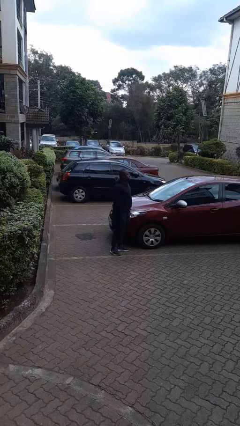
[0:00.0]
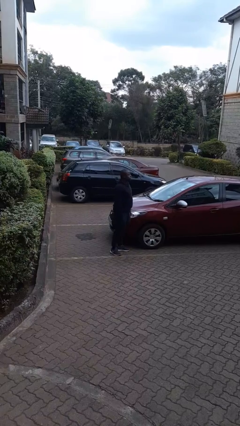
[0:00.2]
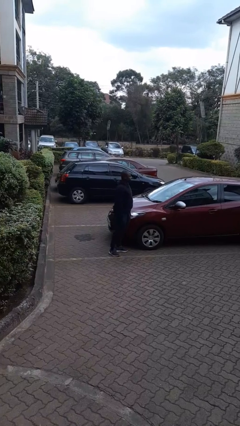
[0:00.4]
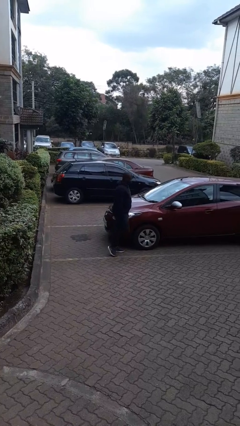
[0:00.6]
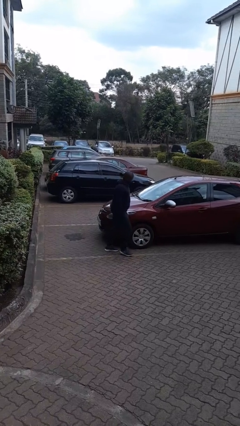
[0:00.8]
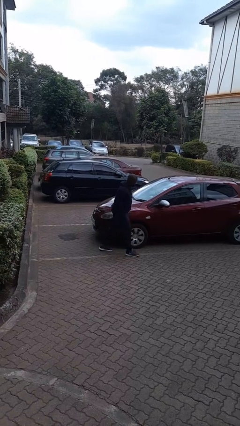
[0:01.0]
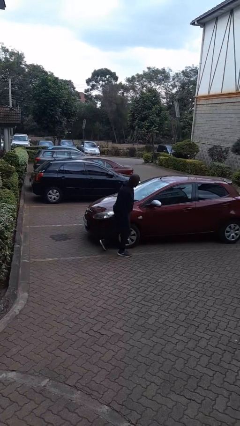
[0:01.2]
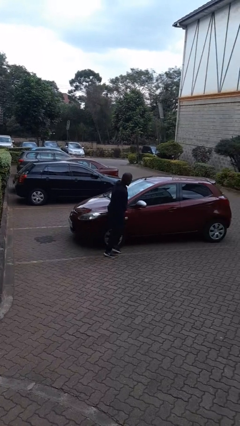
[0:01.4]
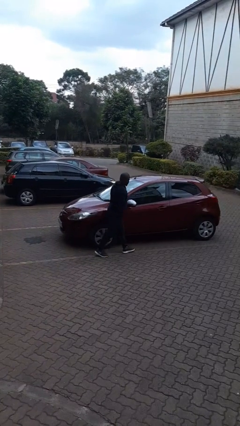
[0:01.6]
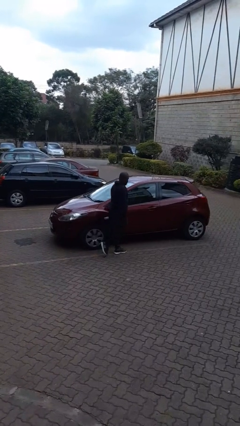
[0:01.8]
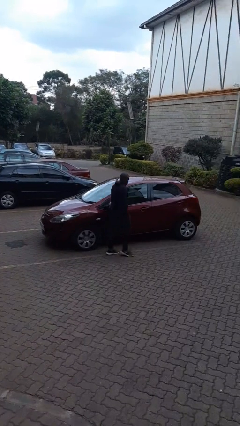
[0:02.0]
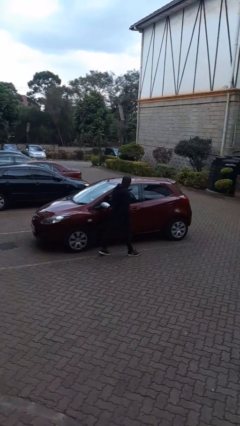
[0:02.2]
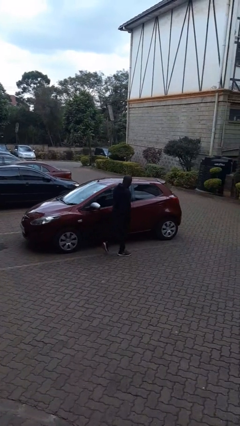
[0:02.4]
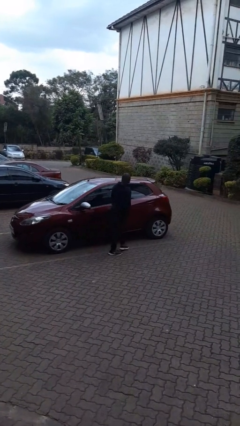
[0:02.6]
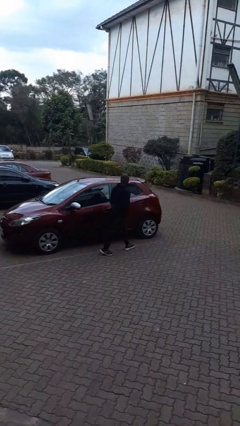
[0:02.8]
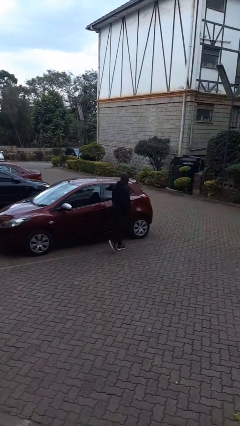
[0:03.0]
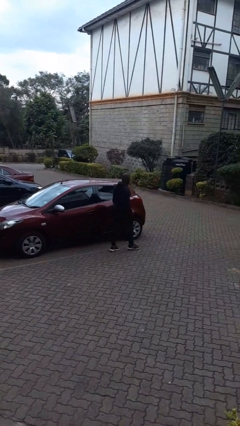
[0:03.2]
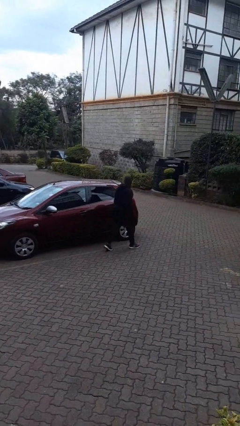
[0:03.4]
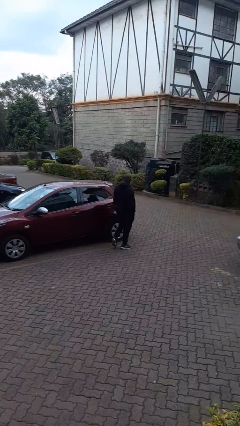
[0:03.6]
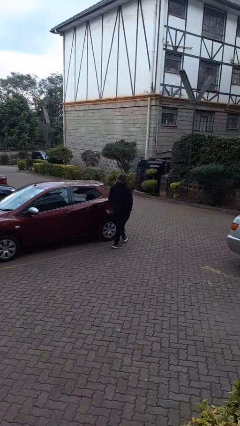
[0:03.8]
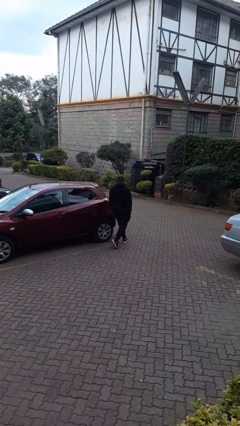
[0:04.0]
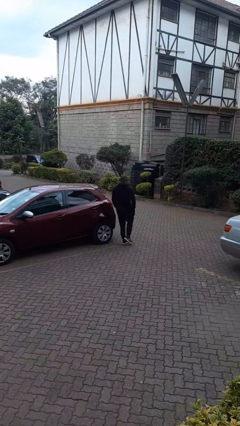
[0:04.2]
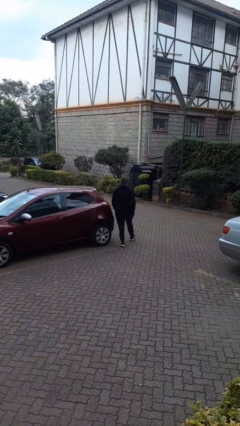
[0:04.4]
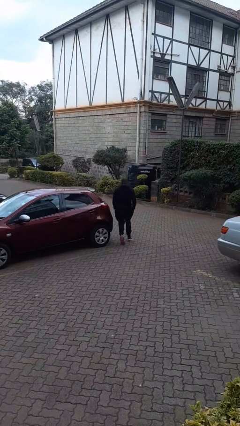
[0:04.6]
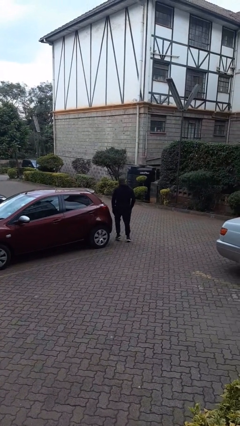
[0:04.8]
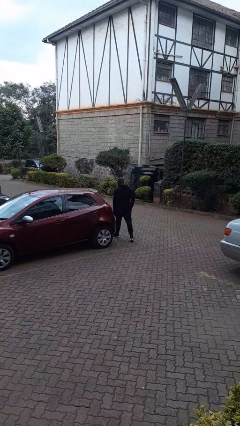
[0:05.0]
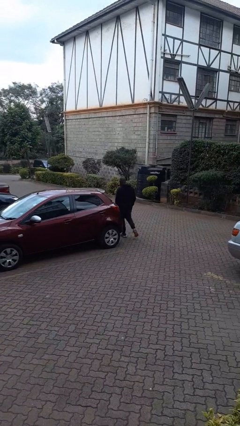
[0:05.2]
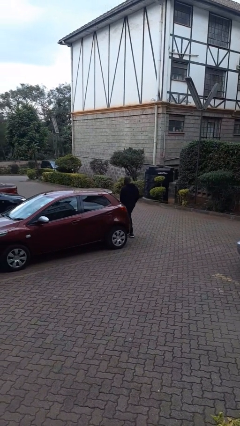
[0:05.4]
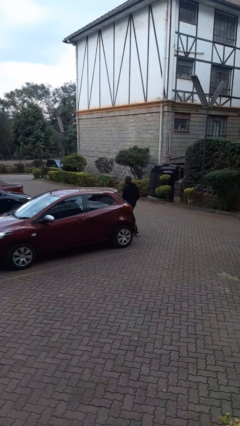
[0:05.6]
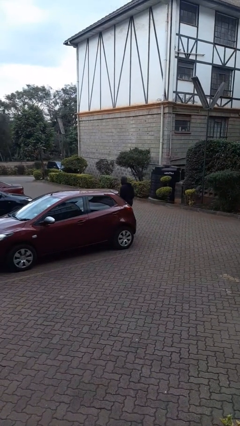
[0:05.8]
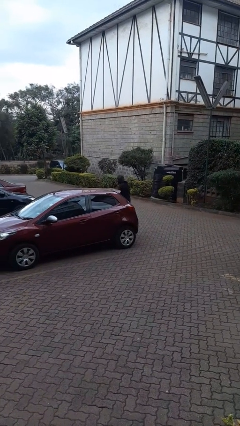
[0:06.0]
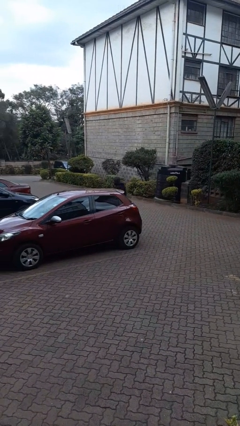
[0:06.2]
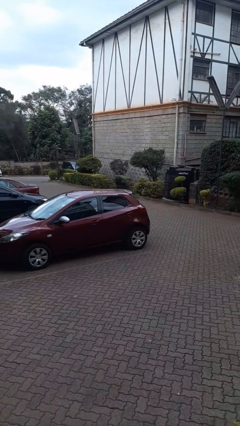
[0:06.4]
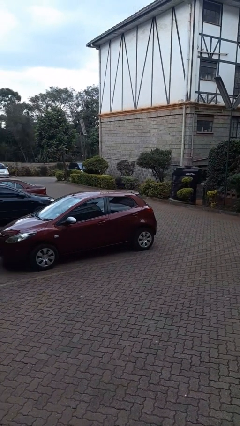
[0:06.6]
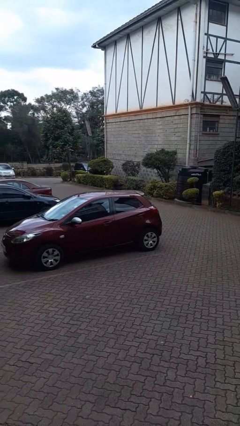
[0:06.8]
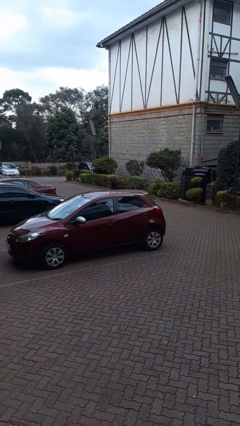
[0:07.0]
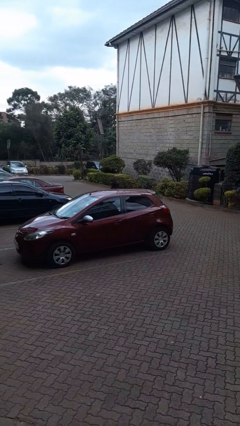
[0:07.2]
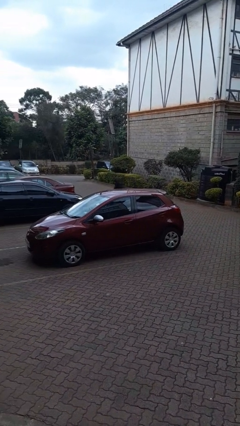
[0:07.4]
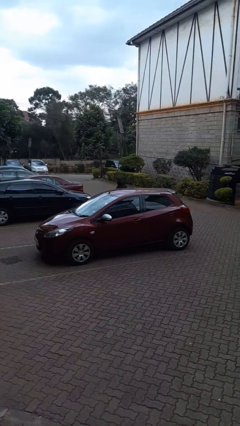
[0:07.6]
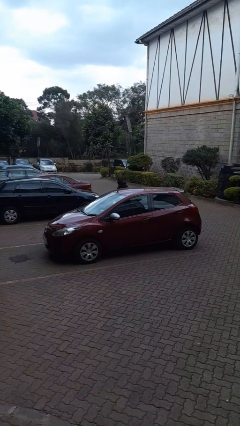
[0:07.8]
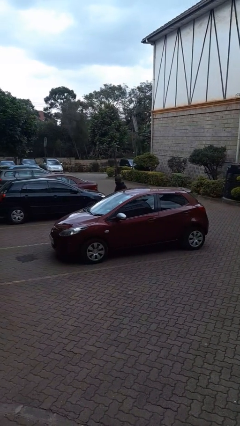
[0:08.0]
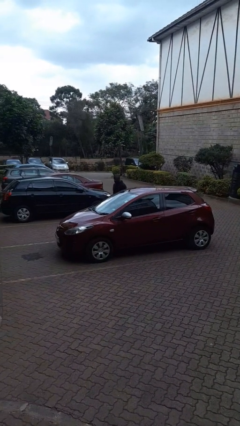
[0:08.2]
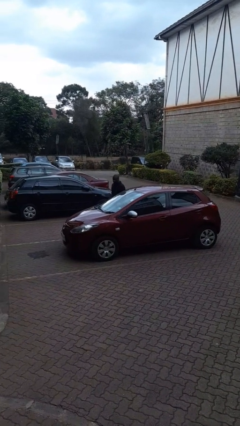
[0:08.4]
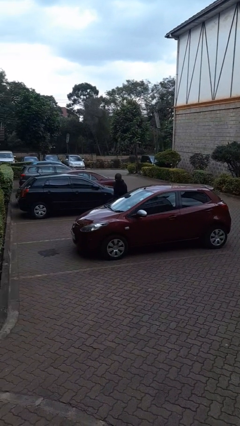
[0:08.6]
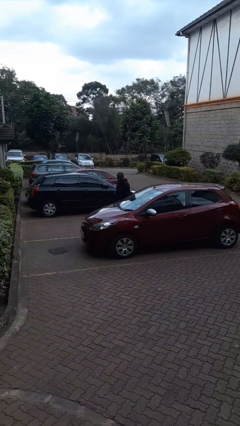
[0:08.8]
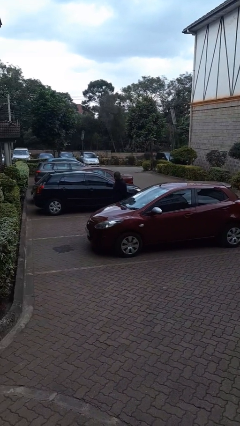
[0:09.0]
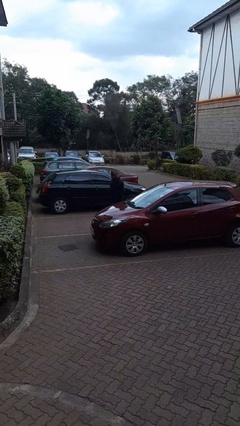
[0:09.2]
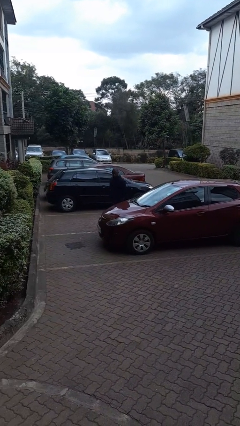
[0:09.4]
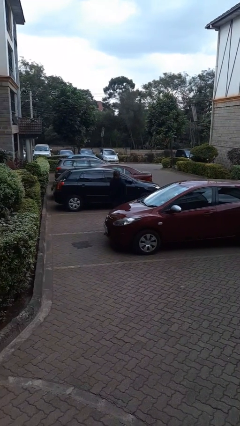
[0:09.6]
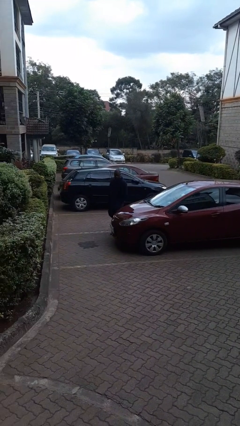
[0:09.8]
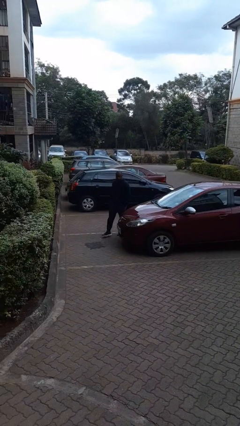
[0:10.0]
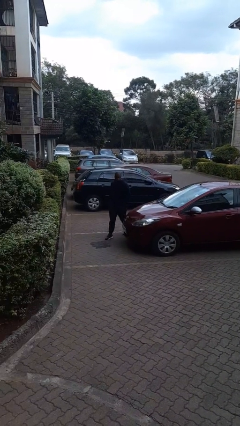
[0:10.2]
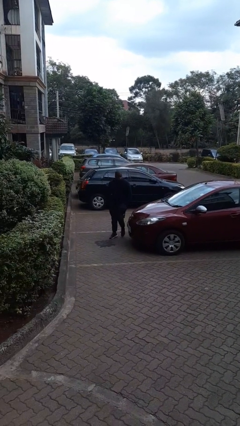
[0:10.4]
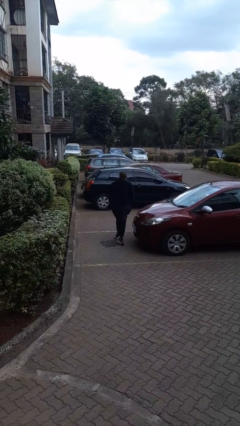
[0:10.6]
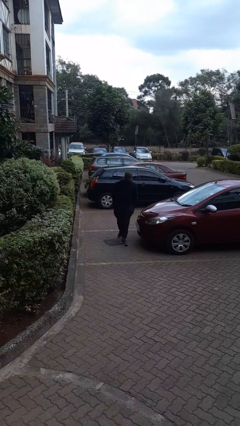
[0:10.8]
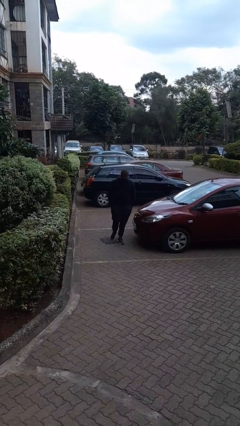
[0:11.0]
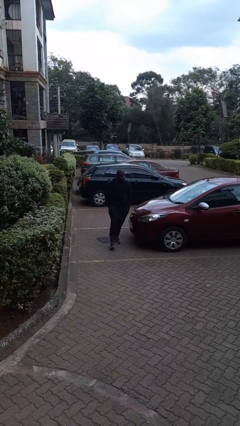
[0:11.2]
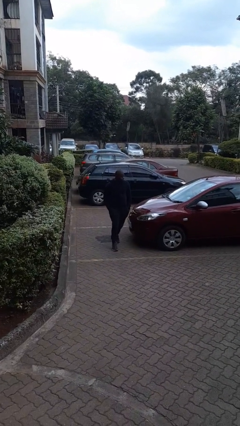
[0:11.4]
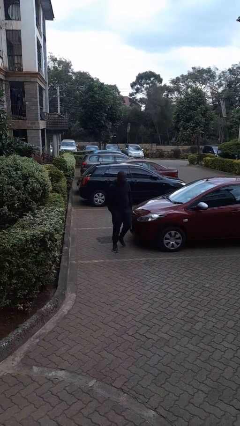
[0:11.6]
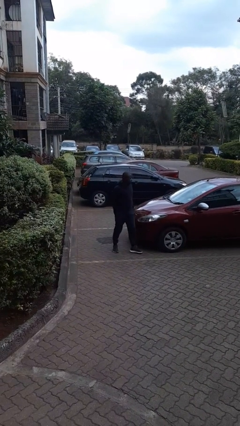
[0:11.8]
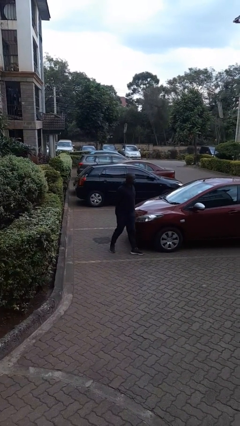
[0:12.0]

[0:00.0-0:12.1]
person walks around car

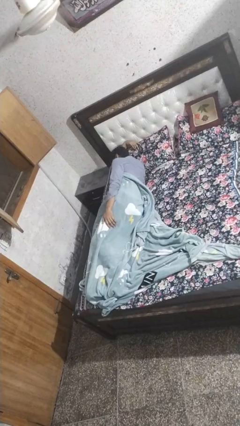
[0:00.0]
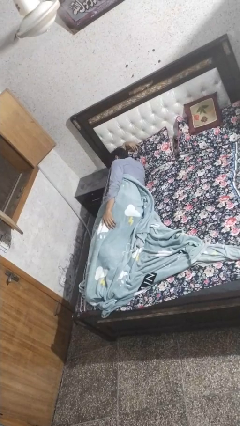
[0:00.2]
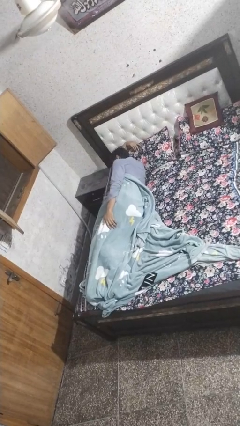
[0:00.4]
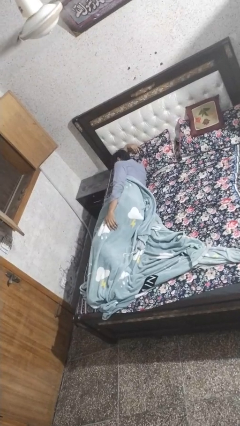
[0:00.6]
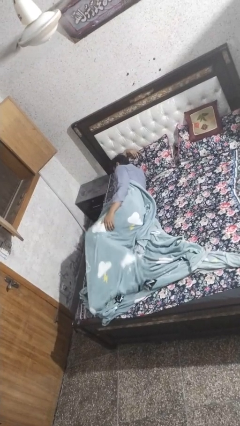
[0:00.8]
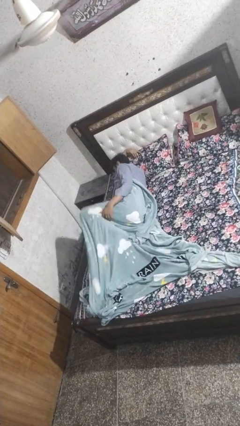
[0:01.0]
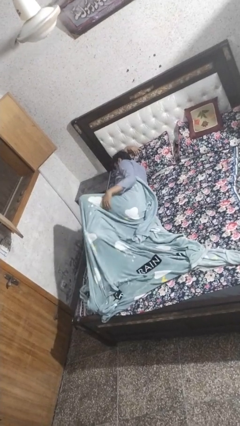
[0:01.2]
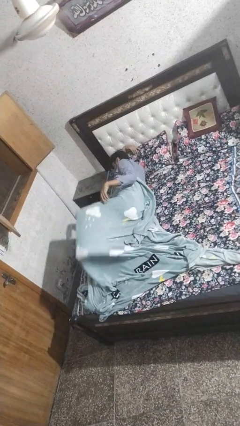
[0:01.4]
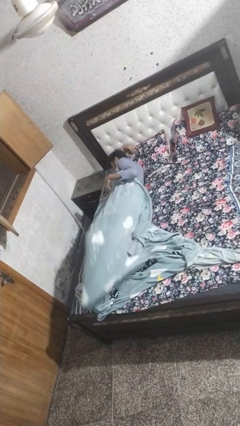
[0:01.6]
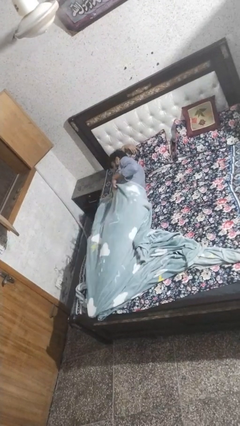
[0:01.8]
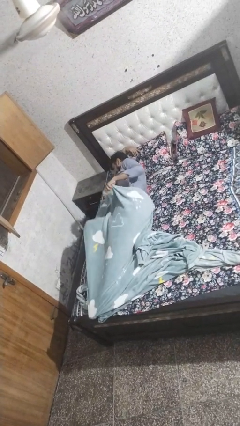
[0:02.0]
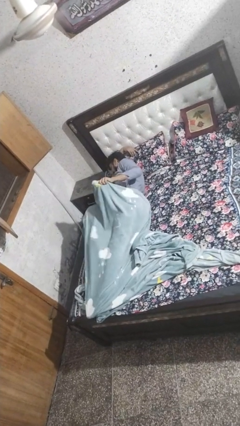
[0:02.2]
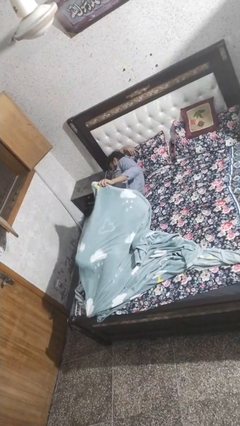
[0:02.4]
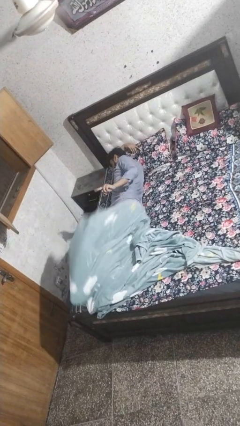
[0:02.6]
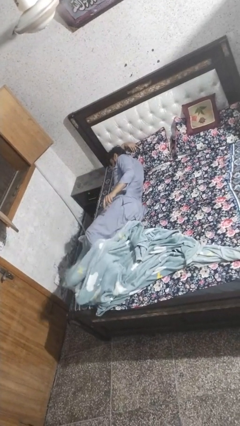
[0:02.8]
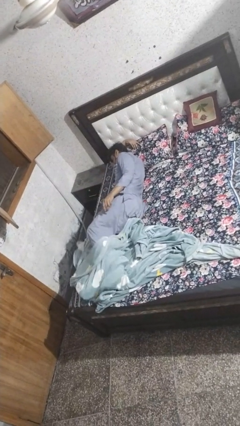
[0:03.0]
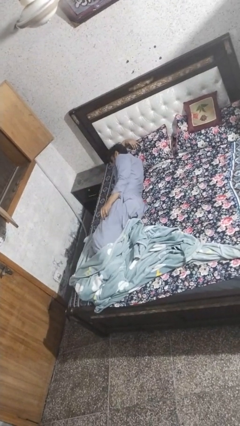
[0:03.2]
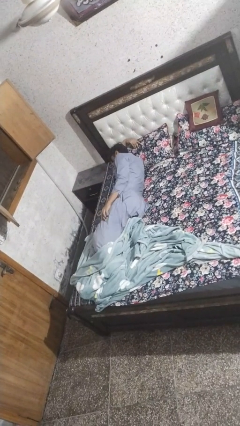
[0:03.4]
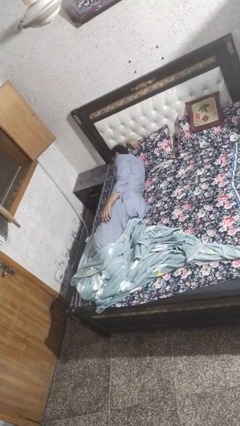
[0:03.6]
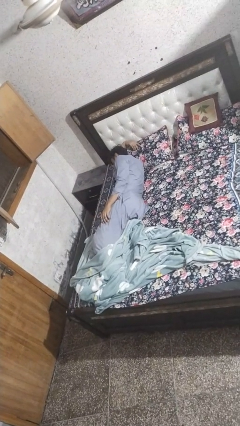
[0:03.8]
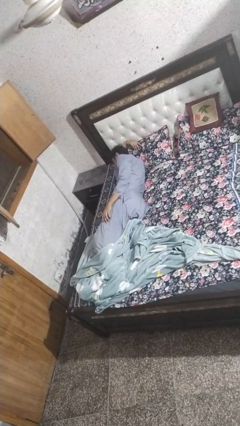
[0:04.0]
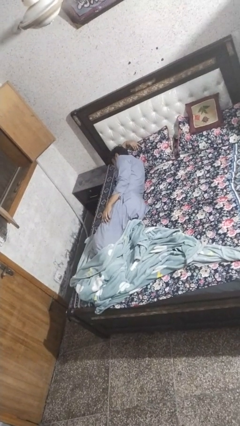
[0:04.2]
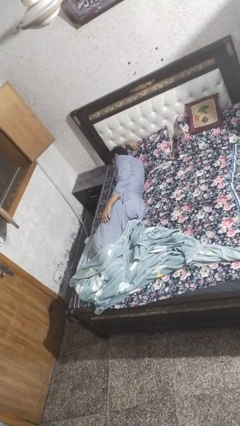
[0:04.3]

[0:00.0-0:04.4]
person uncovers with bedsheets

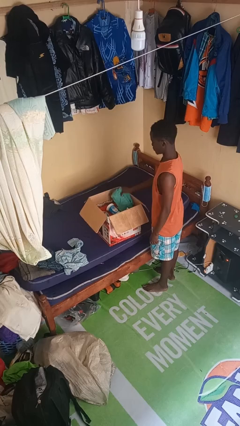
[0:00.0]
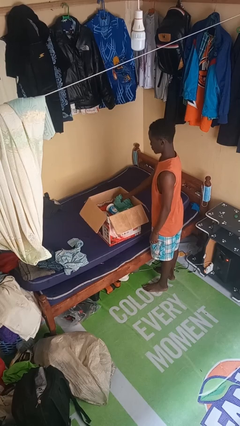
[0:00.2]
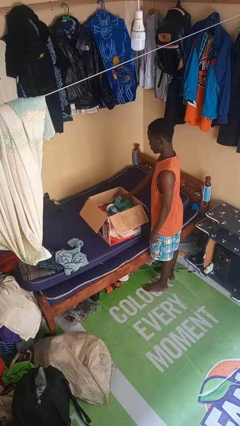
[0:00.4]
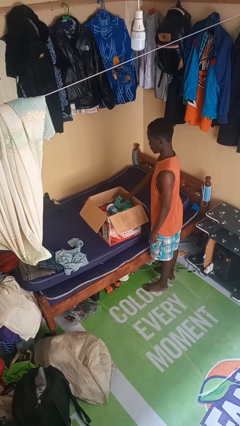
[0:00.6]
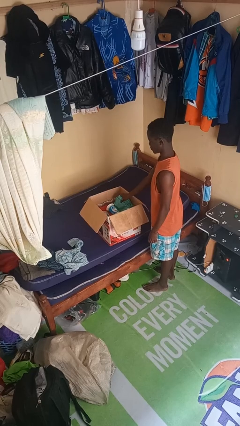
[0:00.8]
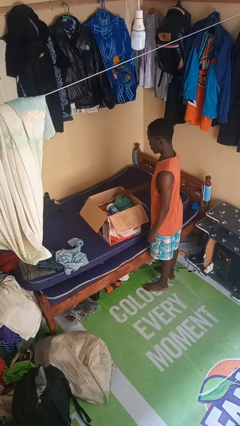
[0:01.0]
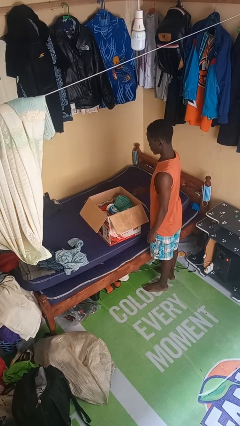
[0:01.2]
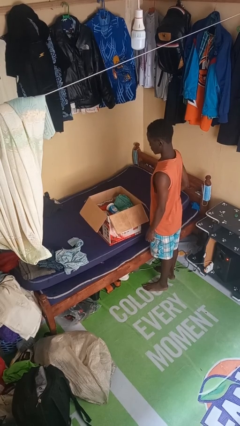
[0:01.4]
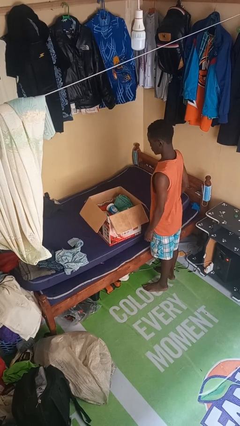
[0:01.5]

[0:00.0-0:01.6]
person puts object into box

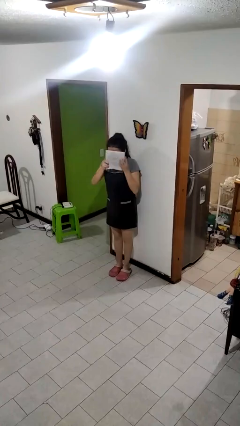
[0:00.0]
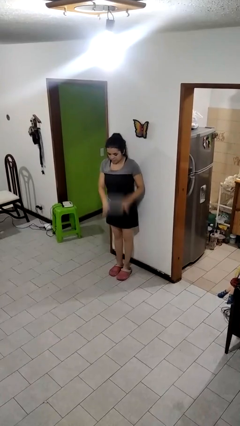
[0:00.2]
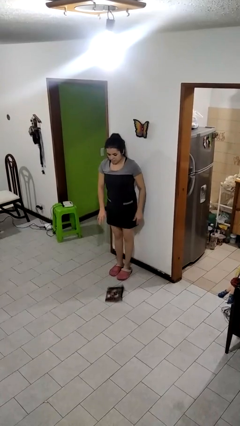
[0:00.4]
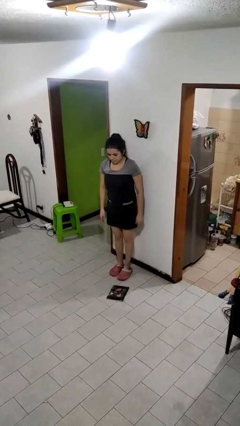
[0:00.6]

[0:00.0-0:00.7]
person throws object to ground
